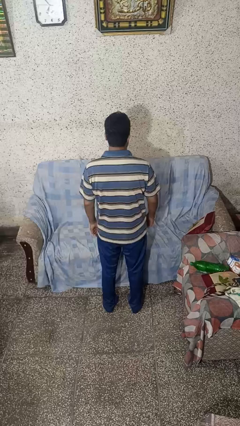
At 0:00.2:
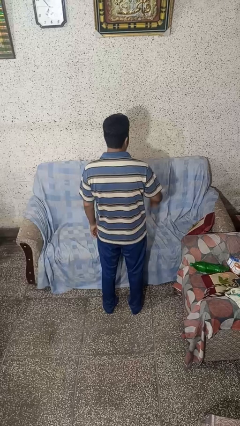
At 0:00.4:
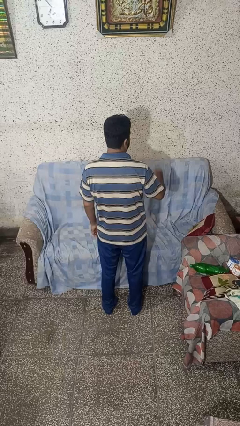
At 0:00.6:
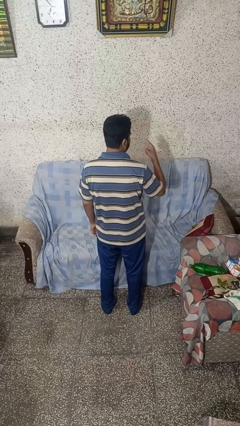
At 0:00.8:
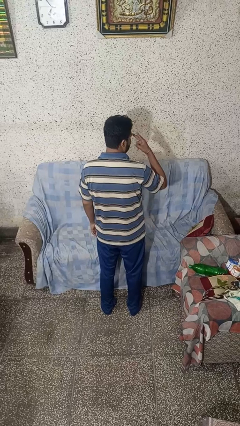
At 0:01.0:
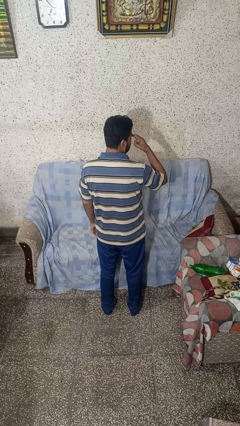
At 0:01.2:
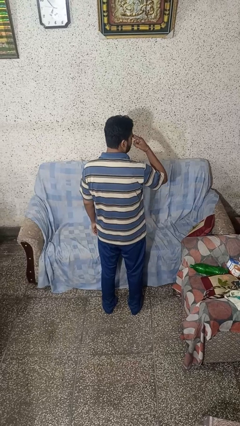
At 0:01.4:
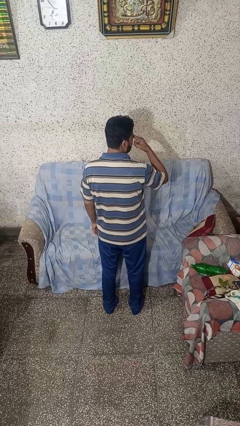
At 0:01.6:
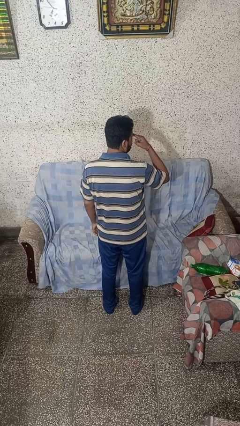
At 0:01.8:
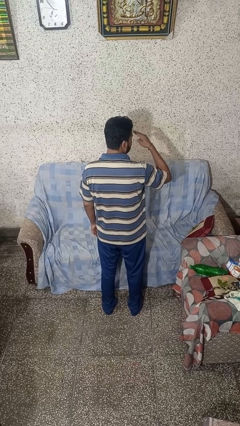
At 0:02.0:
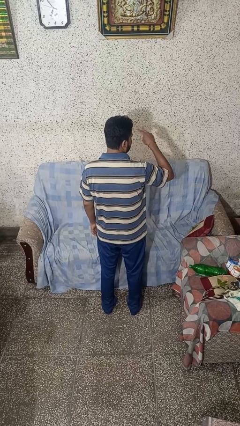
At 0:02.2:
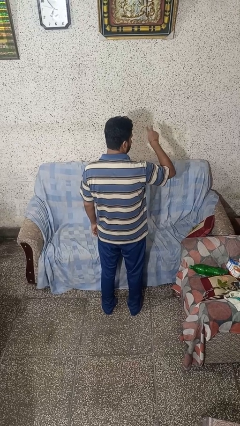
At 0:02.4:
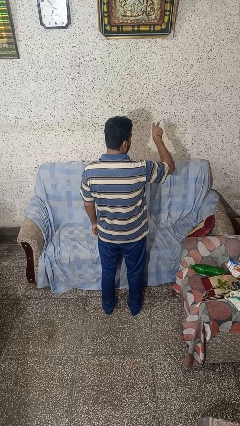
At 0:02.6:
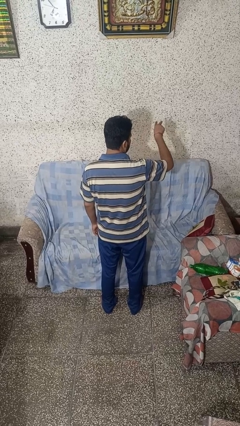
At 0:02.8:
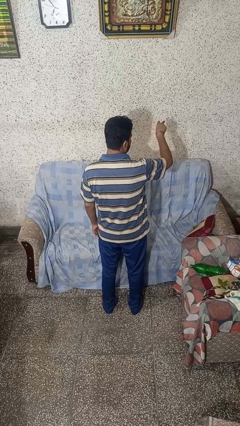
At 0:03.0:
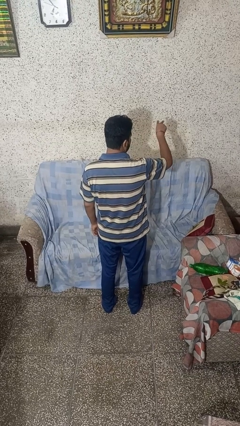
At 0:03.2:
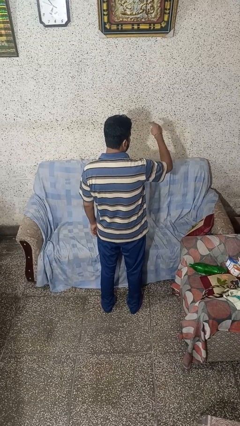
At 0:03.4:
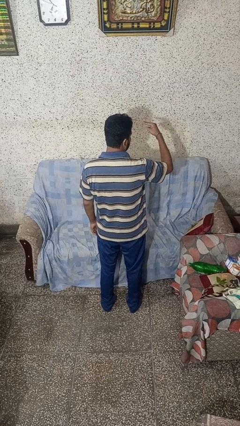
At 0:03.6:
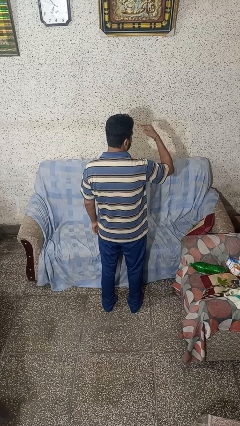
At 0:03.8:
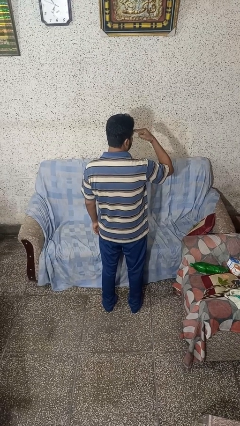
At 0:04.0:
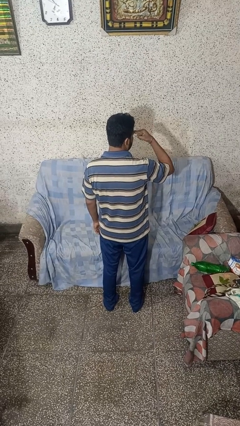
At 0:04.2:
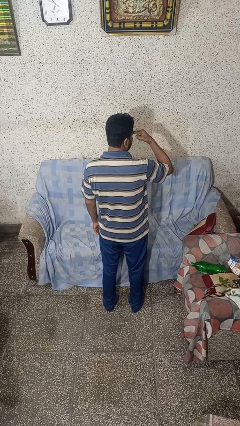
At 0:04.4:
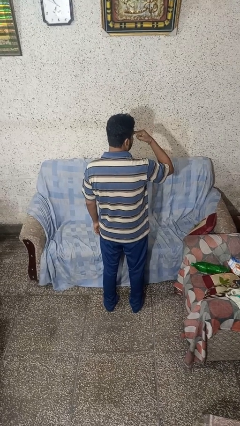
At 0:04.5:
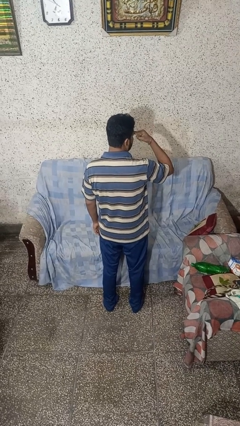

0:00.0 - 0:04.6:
person gestures watch closely

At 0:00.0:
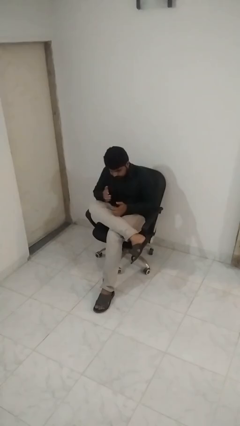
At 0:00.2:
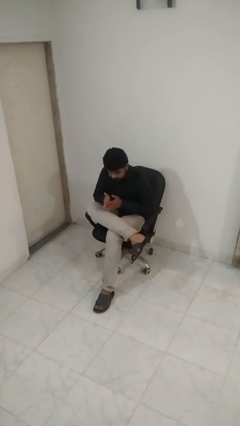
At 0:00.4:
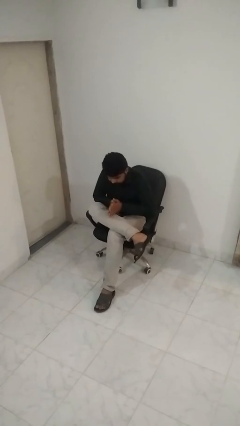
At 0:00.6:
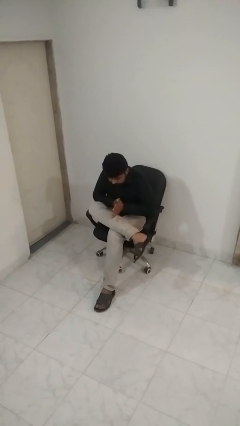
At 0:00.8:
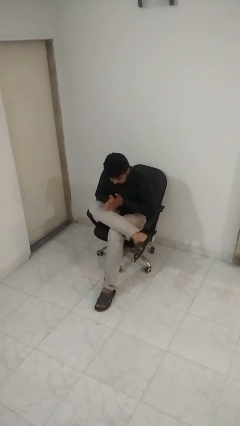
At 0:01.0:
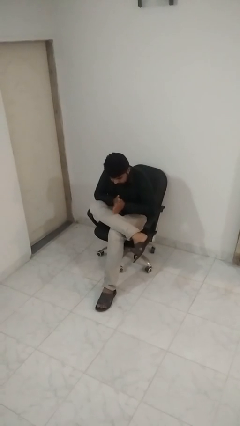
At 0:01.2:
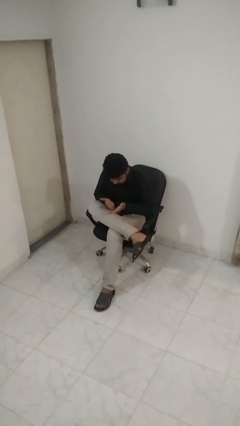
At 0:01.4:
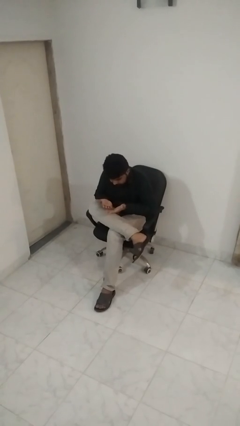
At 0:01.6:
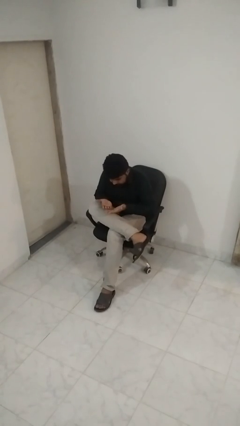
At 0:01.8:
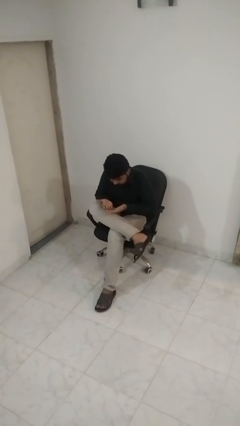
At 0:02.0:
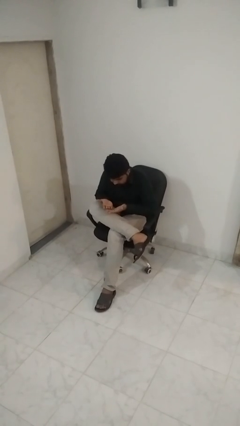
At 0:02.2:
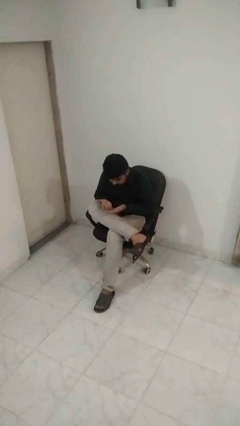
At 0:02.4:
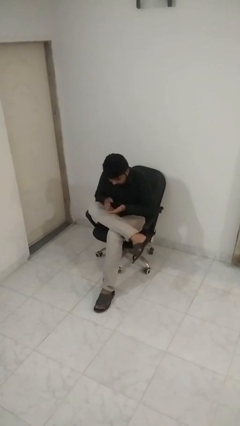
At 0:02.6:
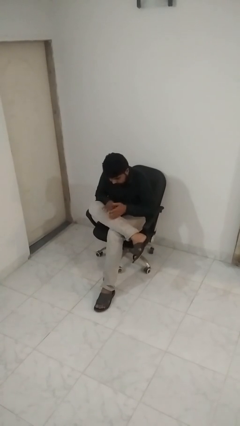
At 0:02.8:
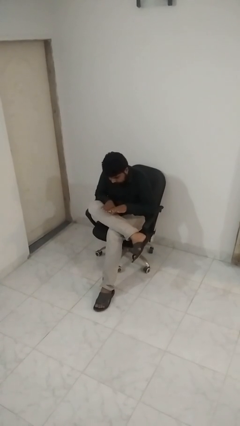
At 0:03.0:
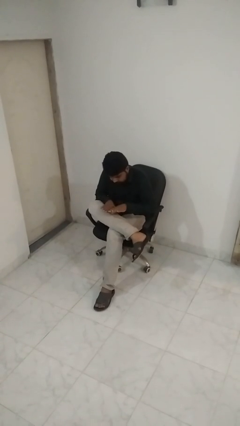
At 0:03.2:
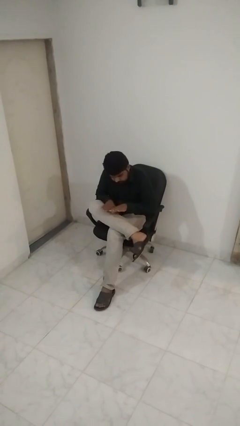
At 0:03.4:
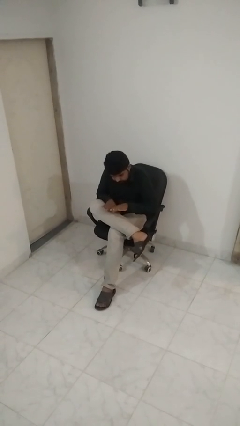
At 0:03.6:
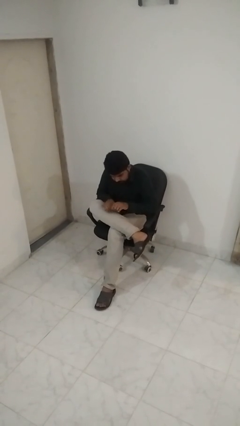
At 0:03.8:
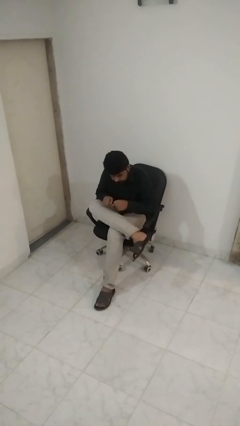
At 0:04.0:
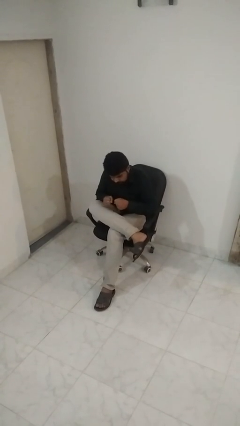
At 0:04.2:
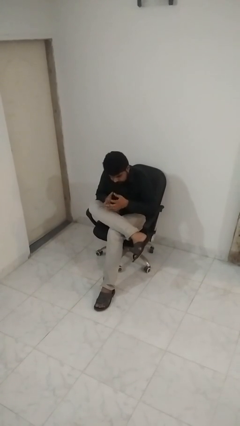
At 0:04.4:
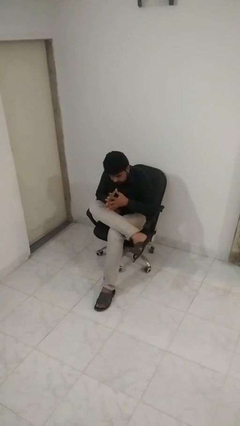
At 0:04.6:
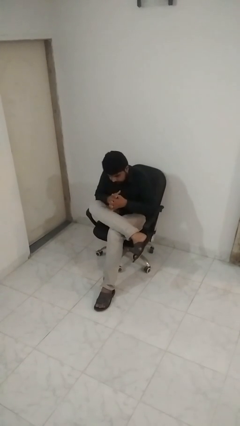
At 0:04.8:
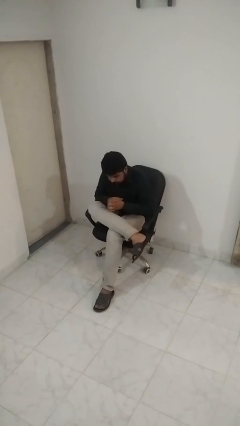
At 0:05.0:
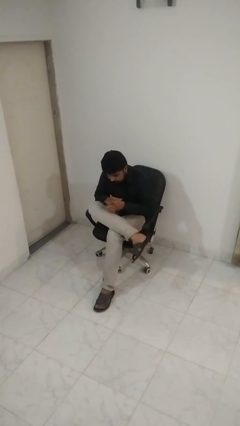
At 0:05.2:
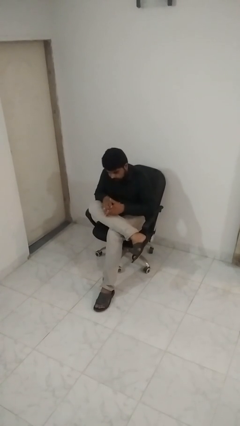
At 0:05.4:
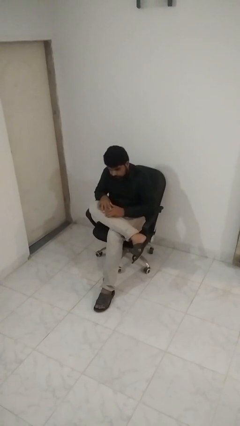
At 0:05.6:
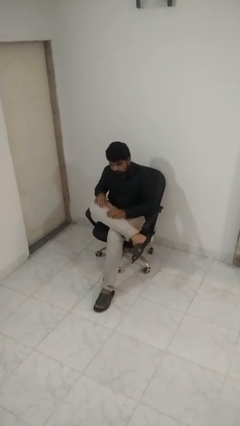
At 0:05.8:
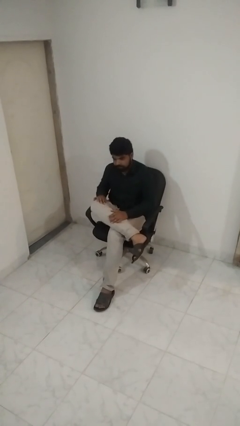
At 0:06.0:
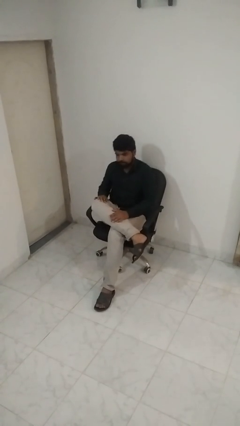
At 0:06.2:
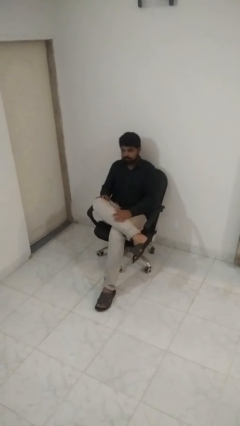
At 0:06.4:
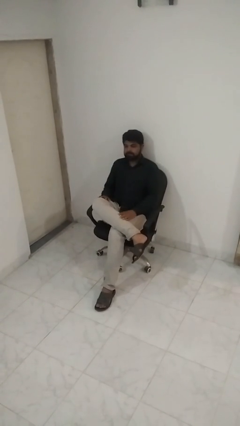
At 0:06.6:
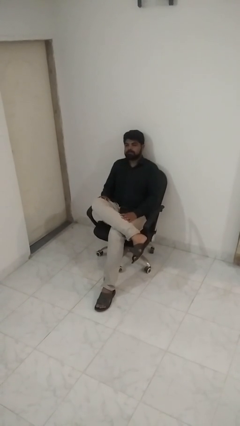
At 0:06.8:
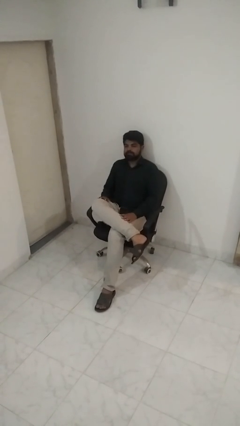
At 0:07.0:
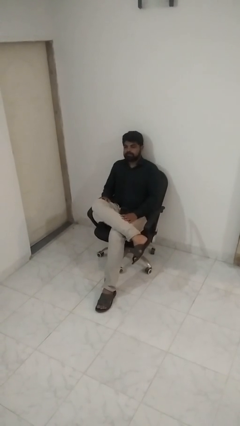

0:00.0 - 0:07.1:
person looks at hands in lap

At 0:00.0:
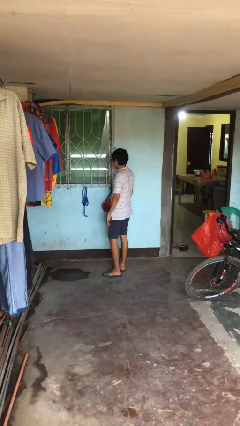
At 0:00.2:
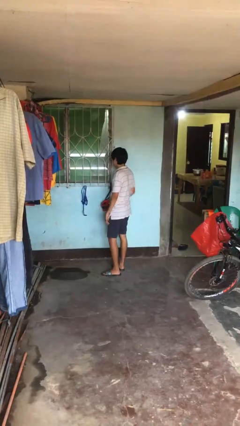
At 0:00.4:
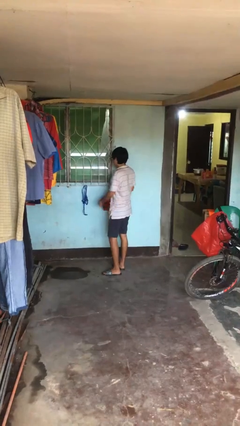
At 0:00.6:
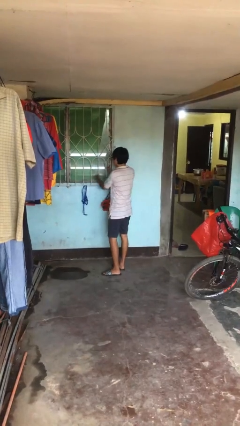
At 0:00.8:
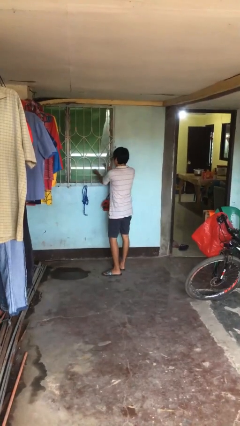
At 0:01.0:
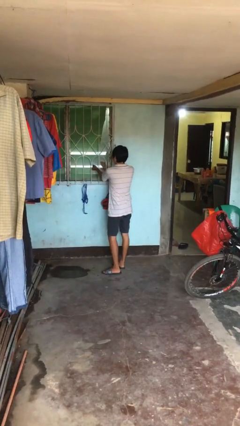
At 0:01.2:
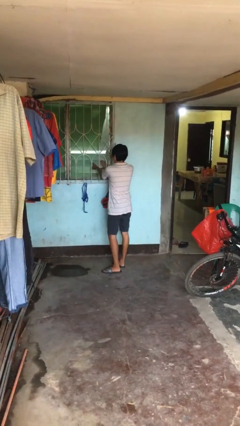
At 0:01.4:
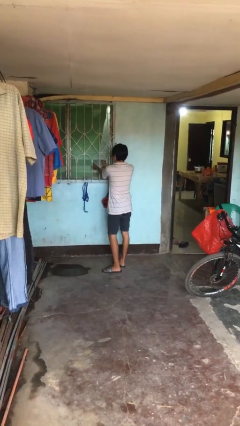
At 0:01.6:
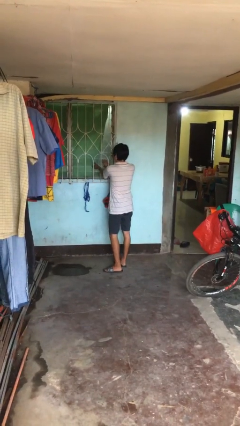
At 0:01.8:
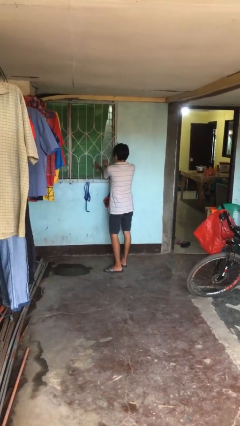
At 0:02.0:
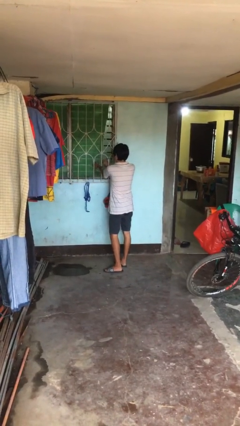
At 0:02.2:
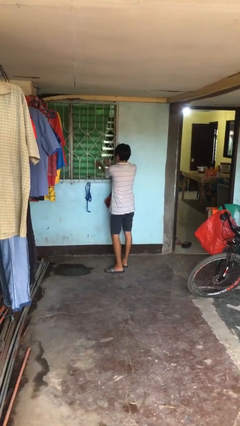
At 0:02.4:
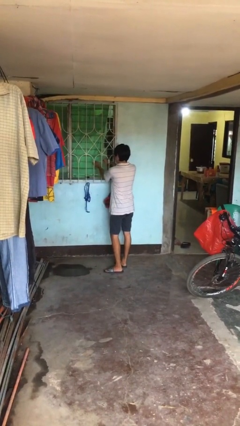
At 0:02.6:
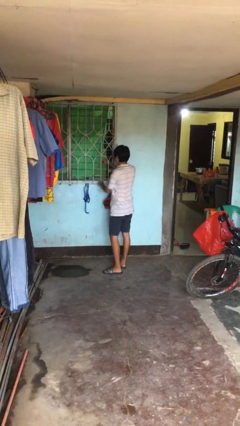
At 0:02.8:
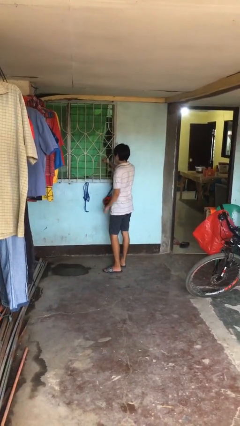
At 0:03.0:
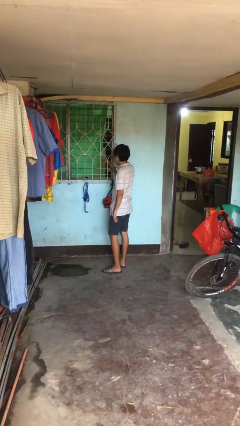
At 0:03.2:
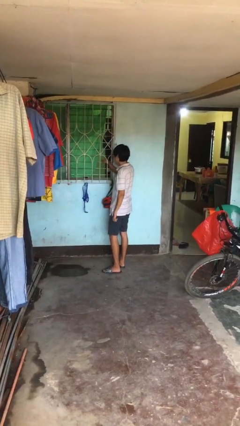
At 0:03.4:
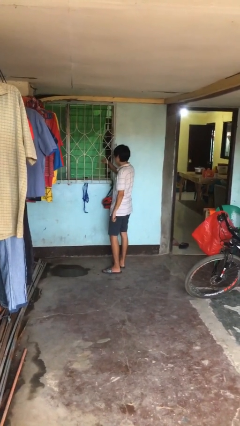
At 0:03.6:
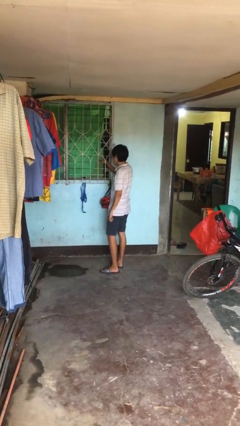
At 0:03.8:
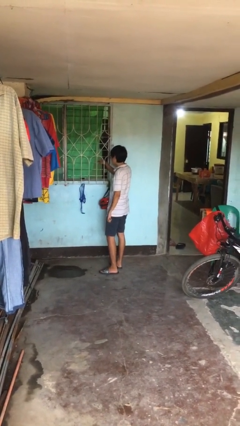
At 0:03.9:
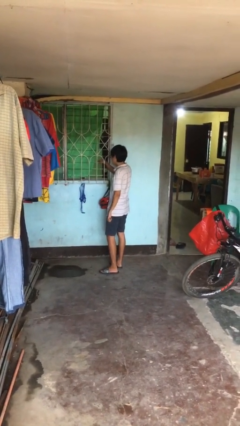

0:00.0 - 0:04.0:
person opens home window

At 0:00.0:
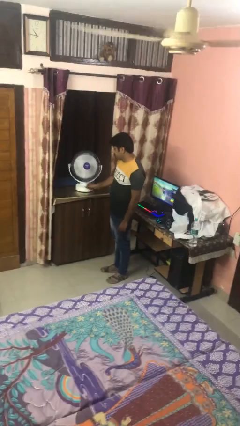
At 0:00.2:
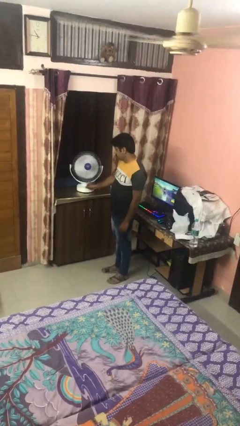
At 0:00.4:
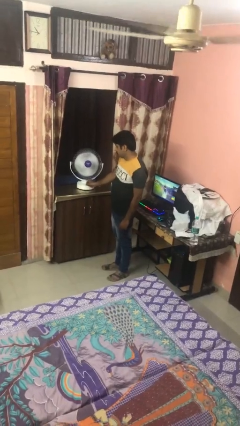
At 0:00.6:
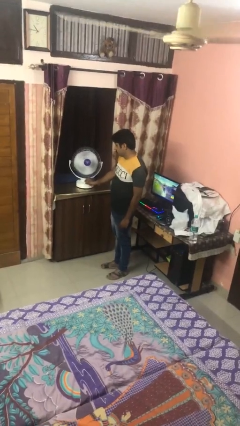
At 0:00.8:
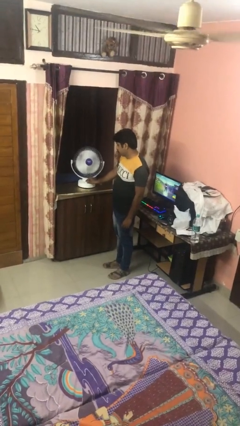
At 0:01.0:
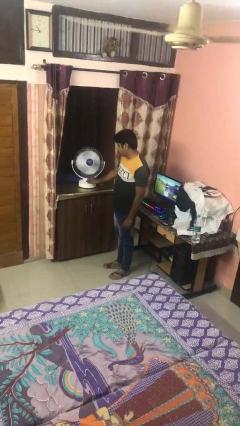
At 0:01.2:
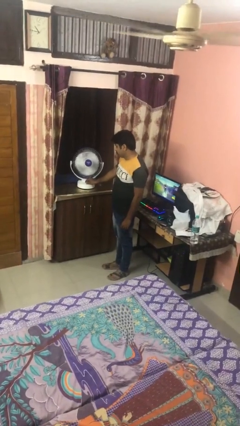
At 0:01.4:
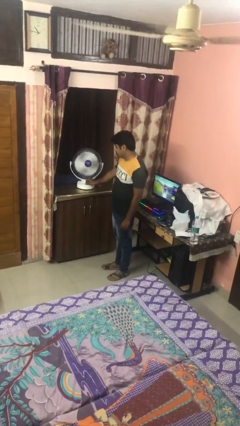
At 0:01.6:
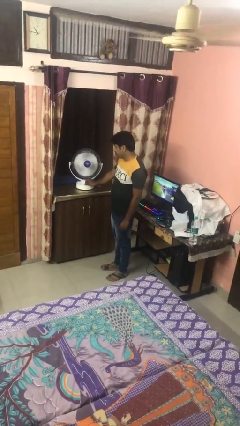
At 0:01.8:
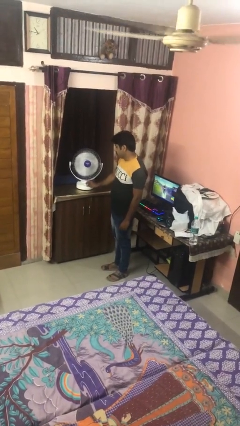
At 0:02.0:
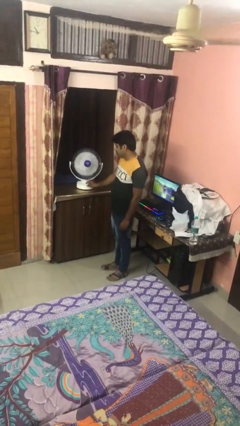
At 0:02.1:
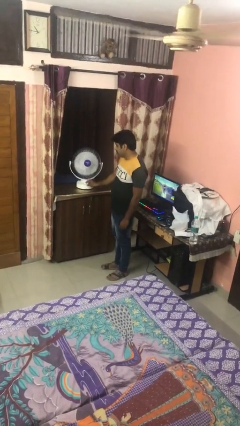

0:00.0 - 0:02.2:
person turns on fan
